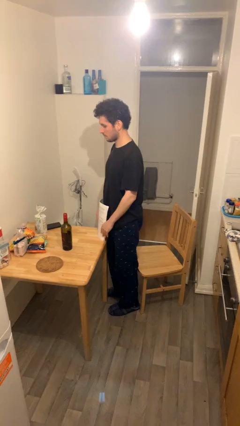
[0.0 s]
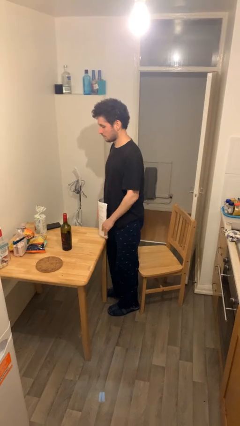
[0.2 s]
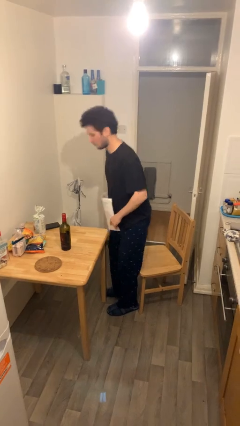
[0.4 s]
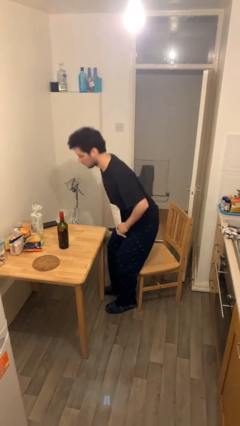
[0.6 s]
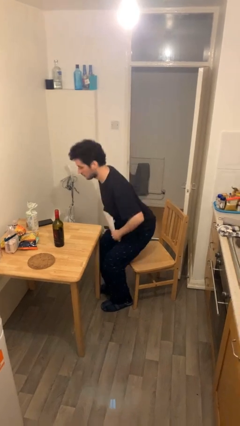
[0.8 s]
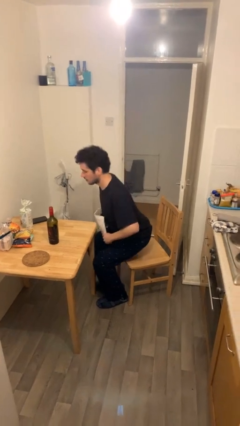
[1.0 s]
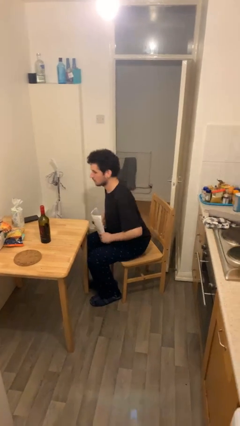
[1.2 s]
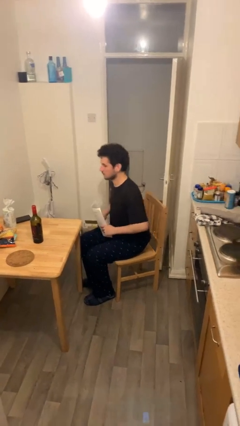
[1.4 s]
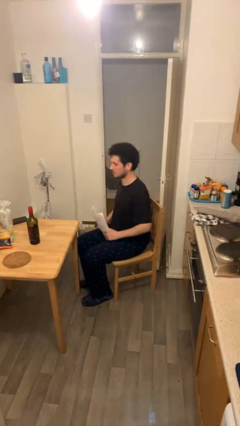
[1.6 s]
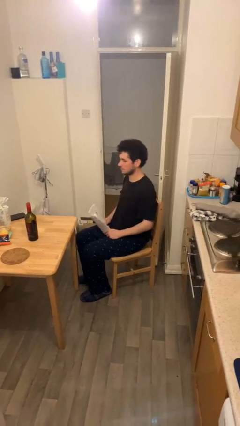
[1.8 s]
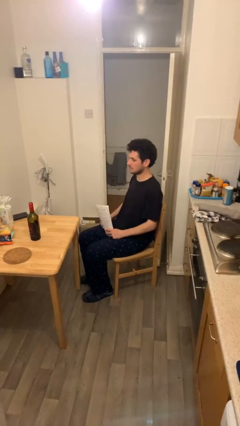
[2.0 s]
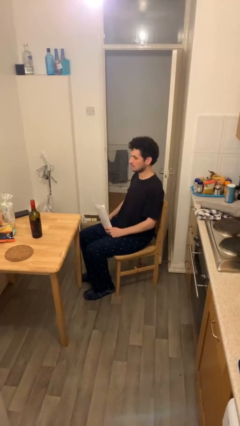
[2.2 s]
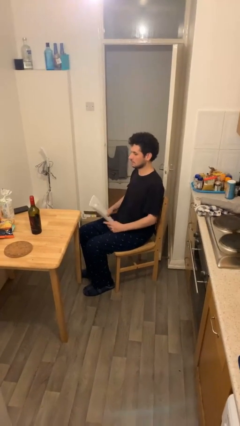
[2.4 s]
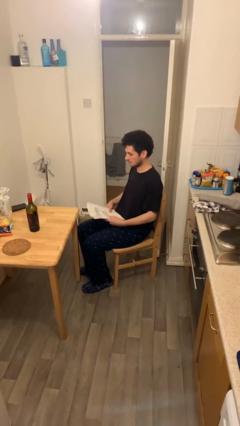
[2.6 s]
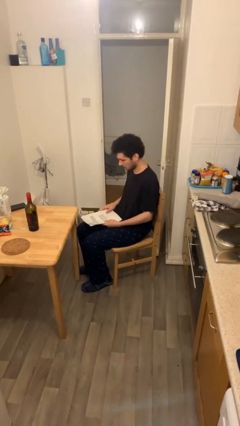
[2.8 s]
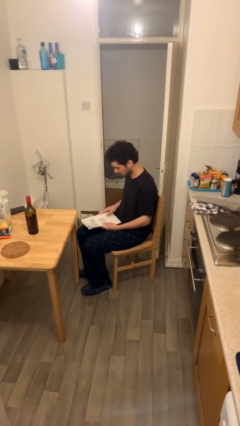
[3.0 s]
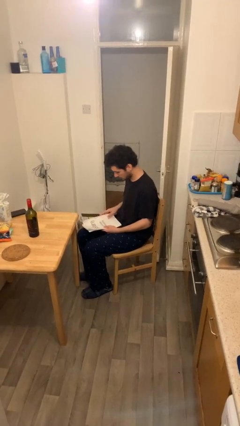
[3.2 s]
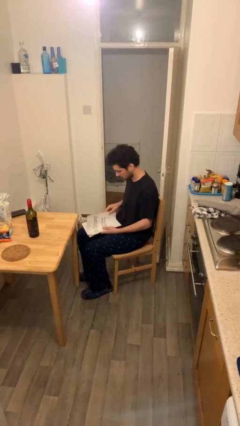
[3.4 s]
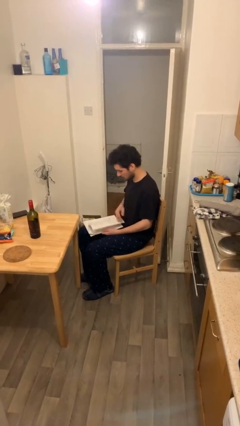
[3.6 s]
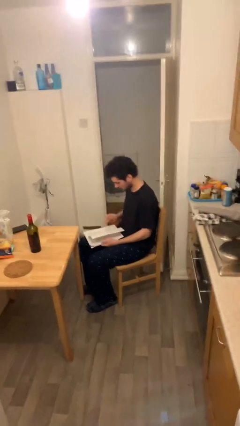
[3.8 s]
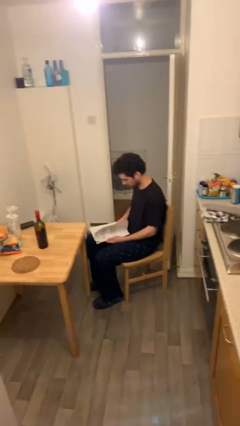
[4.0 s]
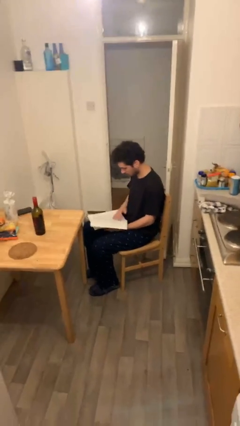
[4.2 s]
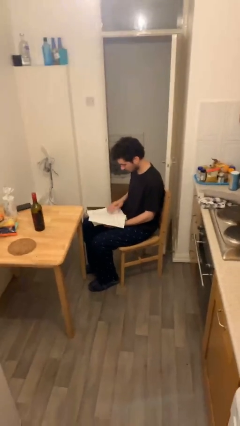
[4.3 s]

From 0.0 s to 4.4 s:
person sits down

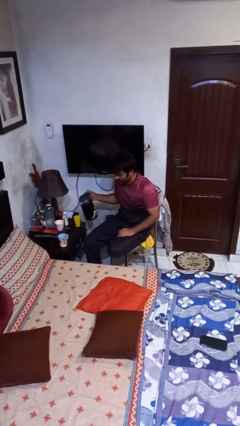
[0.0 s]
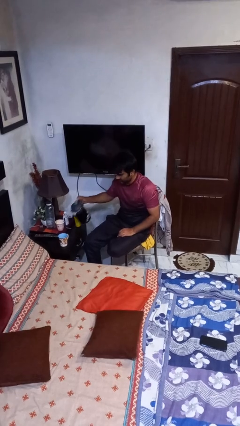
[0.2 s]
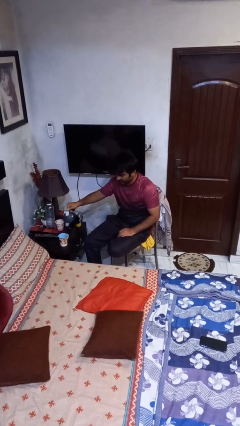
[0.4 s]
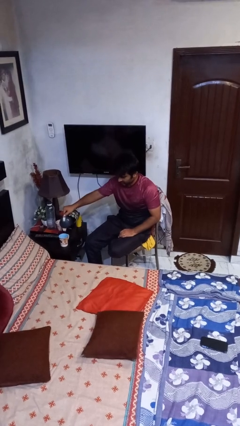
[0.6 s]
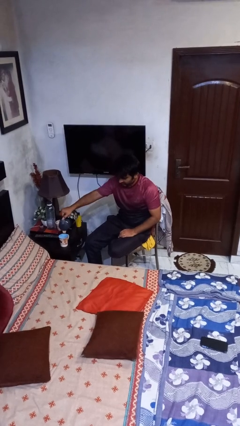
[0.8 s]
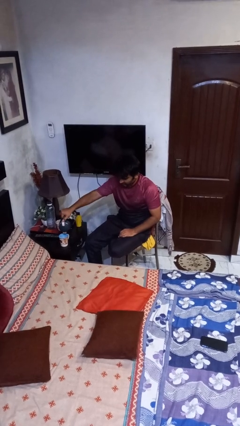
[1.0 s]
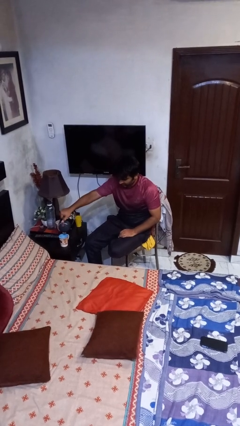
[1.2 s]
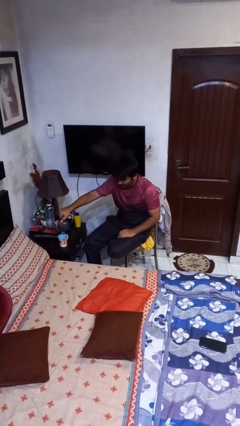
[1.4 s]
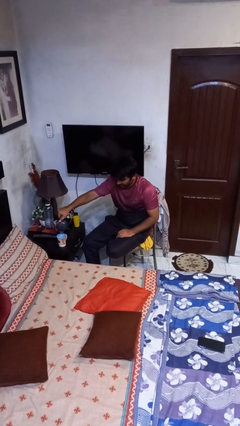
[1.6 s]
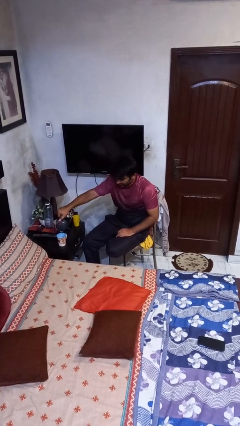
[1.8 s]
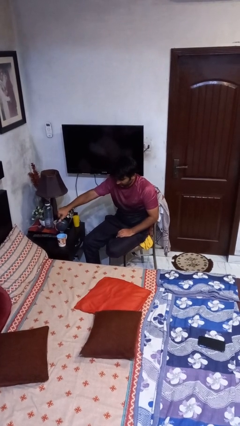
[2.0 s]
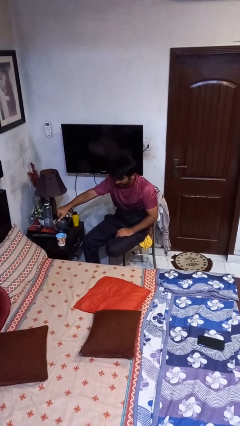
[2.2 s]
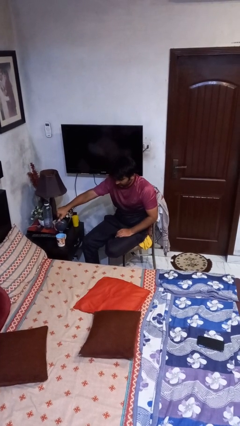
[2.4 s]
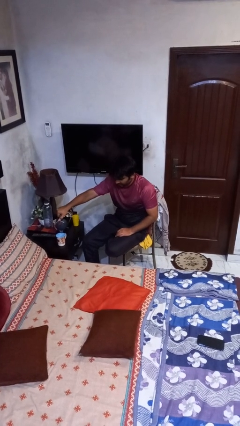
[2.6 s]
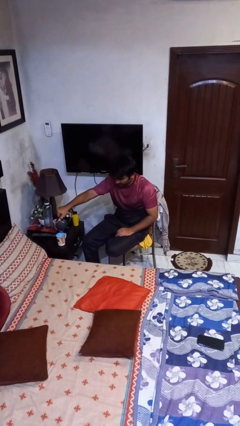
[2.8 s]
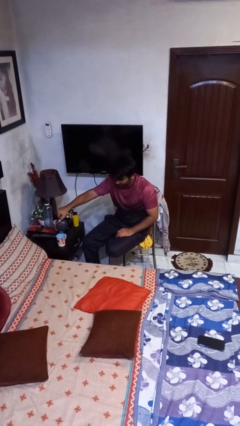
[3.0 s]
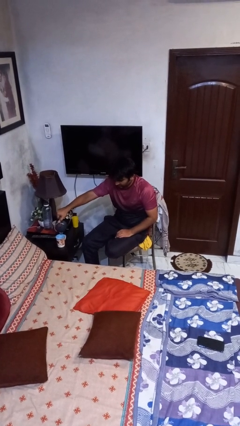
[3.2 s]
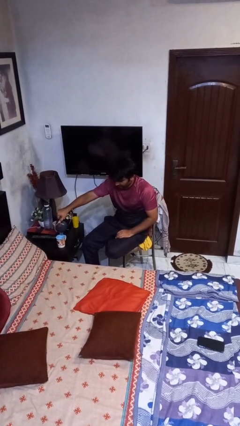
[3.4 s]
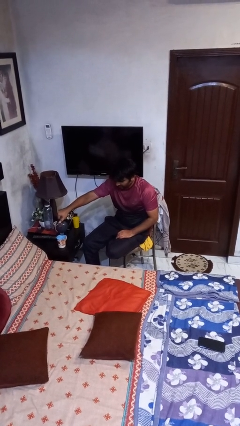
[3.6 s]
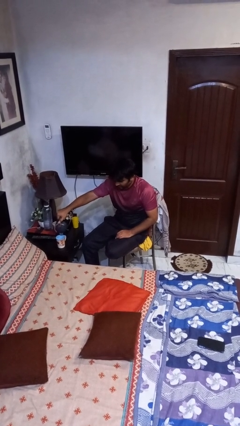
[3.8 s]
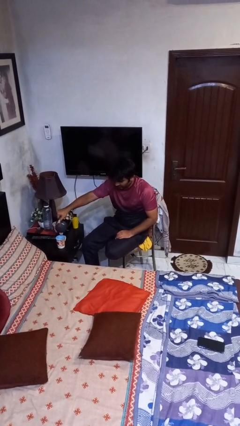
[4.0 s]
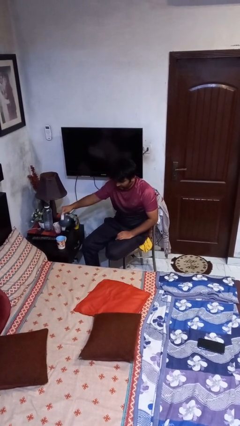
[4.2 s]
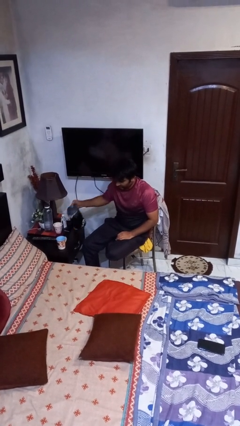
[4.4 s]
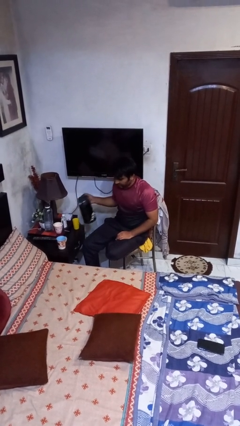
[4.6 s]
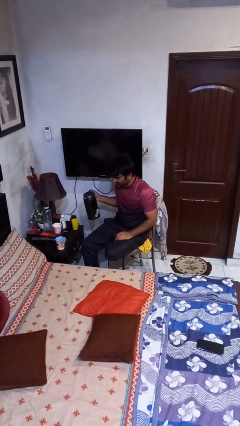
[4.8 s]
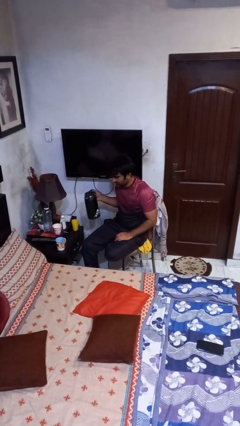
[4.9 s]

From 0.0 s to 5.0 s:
person pours coffee into mug

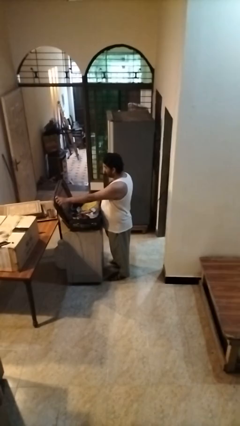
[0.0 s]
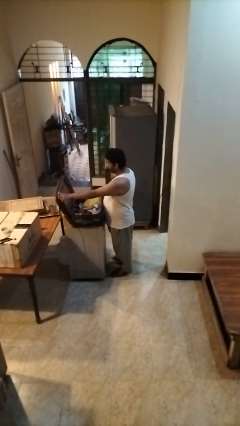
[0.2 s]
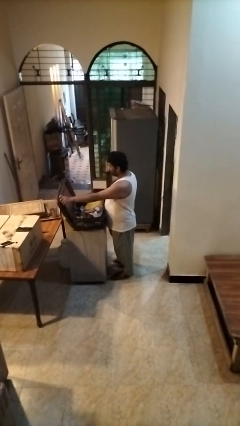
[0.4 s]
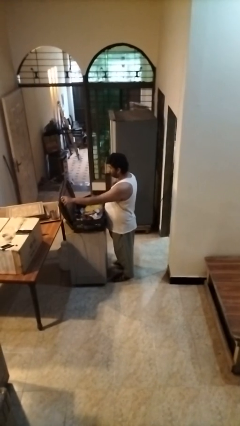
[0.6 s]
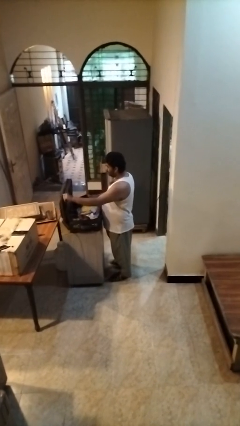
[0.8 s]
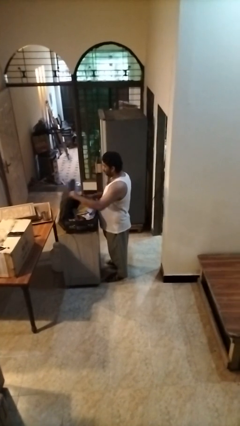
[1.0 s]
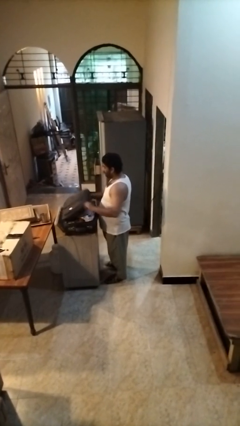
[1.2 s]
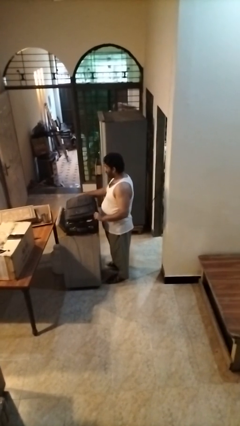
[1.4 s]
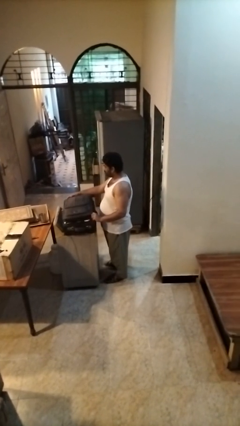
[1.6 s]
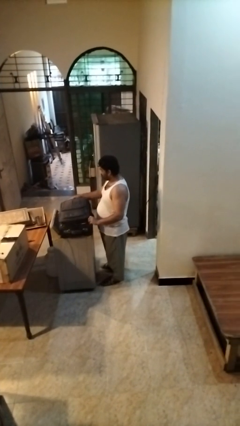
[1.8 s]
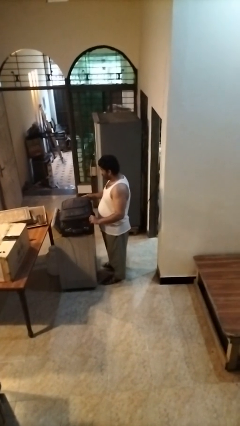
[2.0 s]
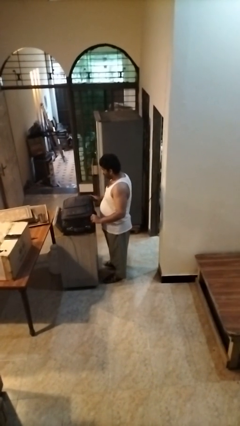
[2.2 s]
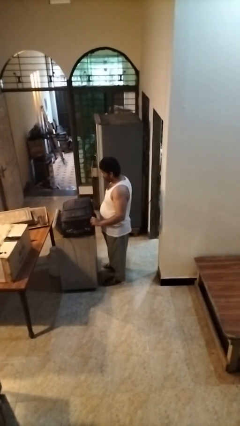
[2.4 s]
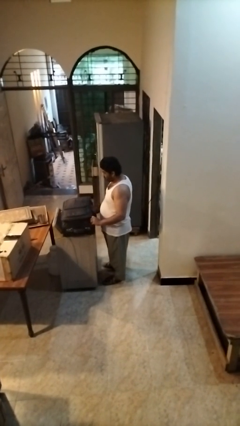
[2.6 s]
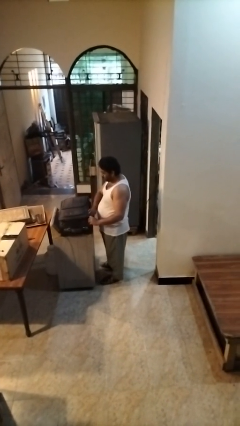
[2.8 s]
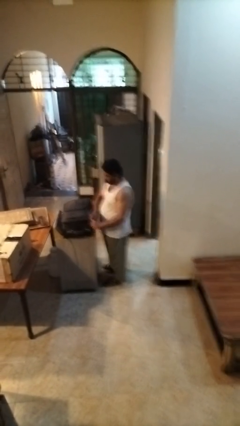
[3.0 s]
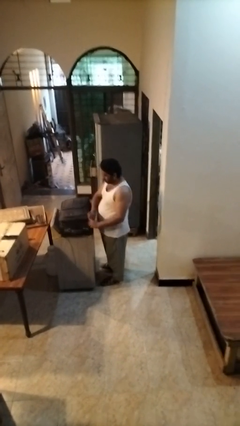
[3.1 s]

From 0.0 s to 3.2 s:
person closes suitcase

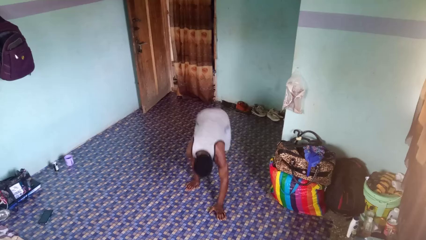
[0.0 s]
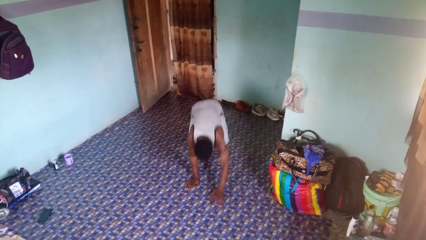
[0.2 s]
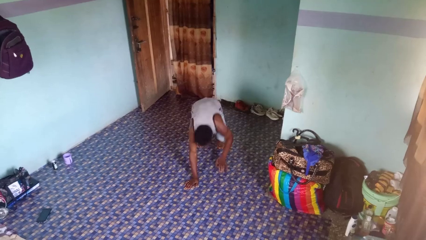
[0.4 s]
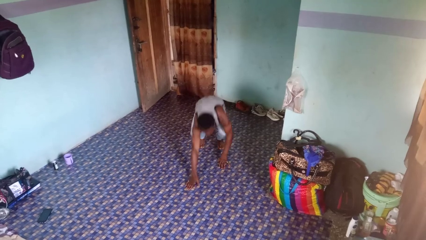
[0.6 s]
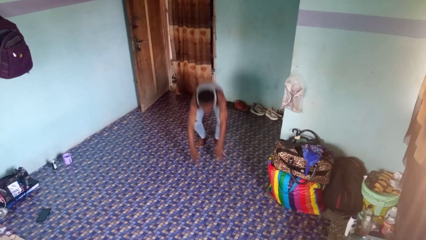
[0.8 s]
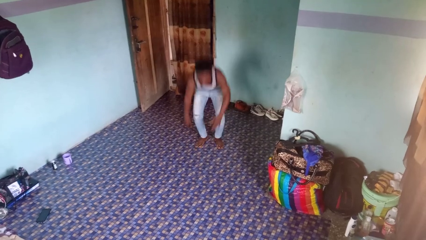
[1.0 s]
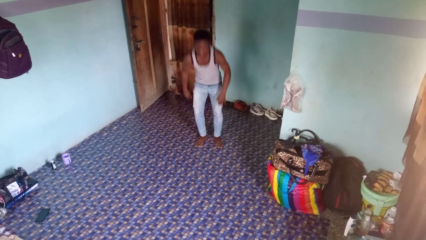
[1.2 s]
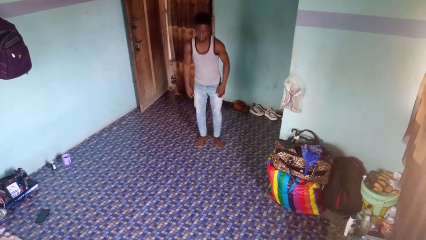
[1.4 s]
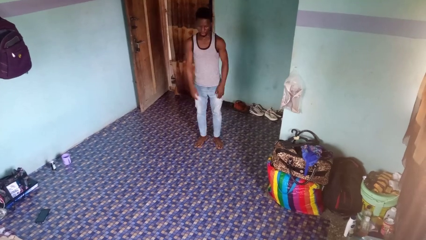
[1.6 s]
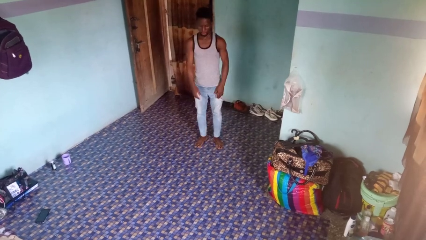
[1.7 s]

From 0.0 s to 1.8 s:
person stands up from floor

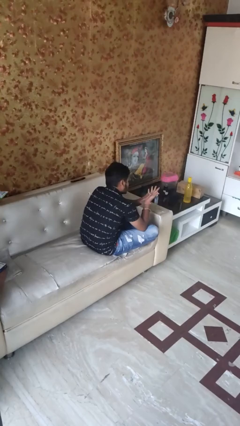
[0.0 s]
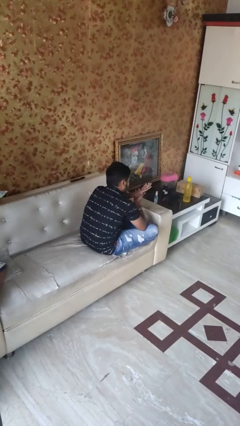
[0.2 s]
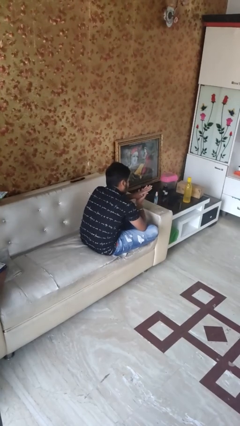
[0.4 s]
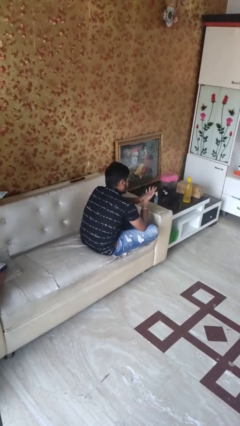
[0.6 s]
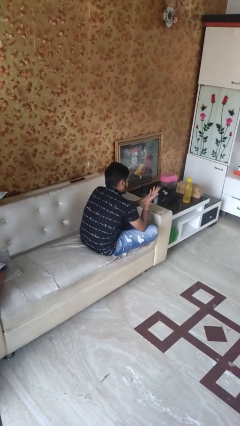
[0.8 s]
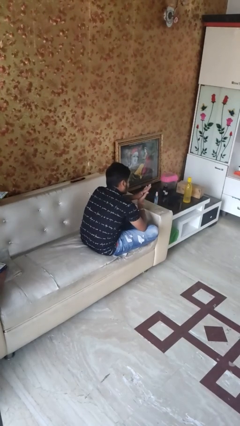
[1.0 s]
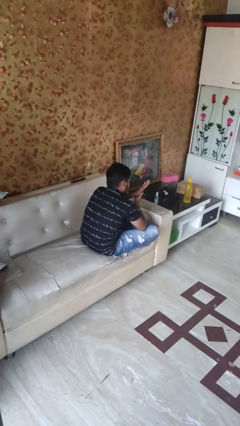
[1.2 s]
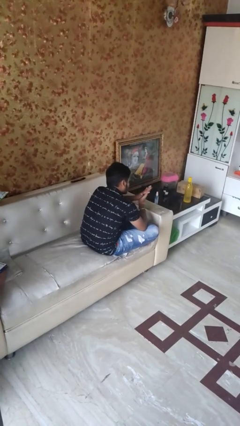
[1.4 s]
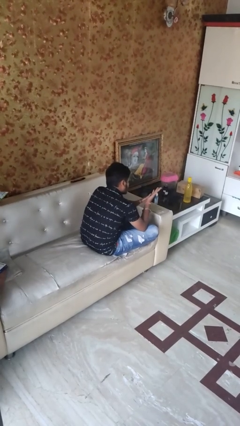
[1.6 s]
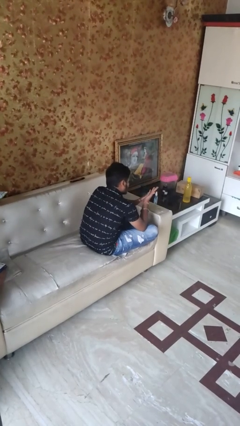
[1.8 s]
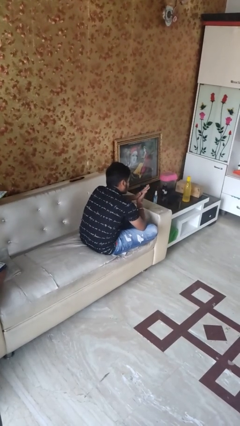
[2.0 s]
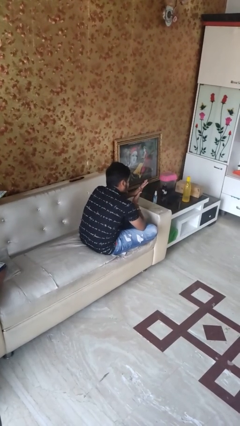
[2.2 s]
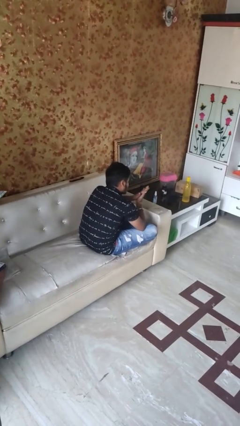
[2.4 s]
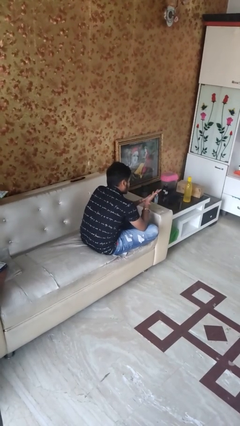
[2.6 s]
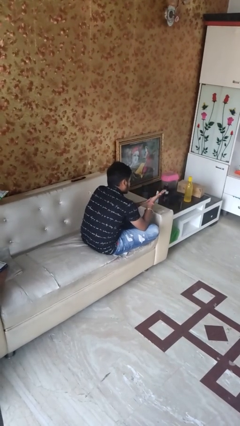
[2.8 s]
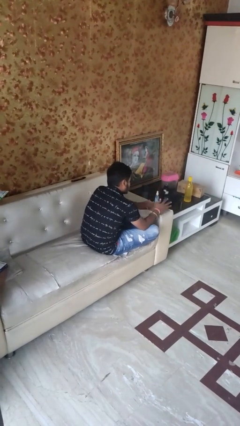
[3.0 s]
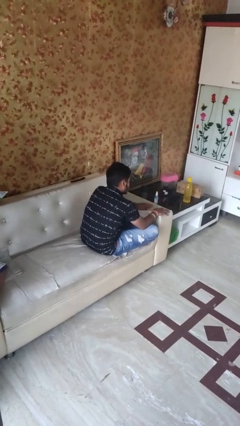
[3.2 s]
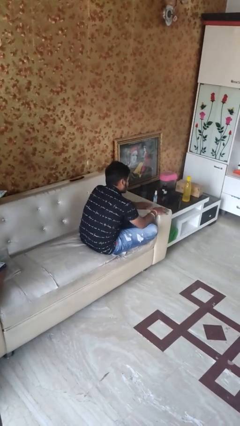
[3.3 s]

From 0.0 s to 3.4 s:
person looks at hands in lap
